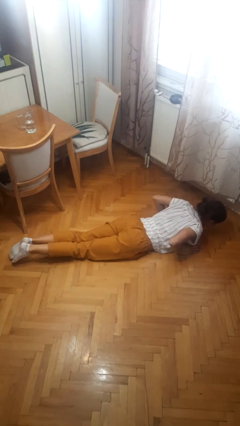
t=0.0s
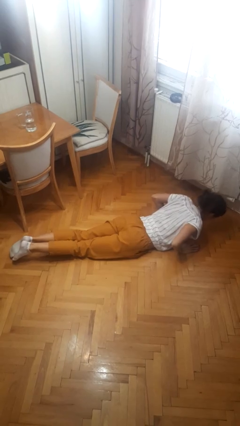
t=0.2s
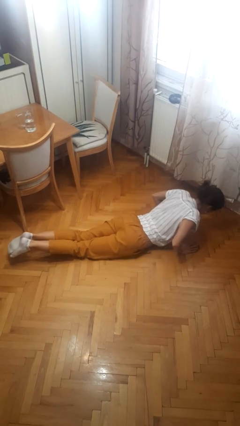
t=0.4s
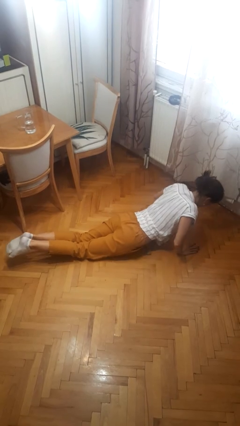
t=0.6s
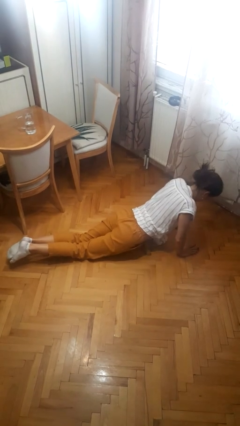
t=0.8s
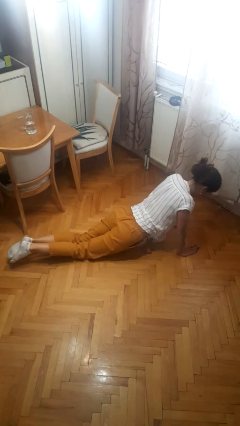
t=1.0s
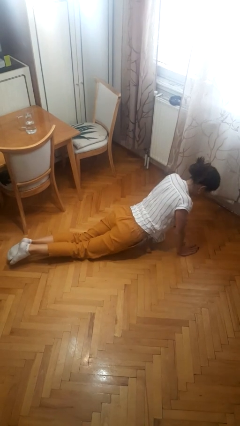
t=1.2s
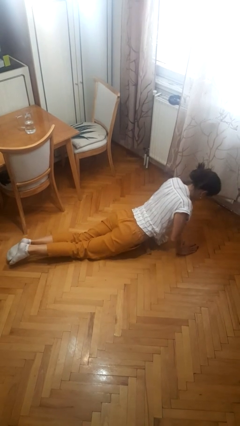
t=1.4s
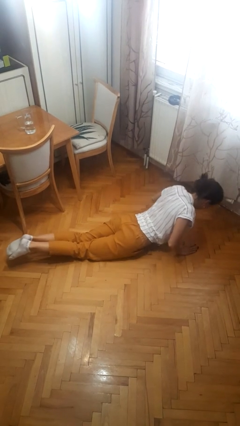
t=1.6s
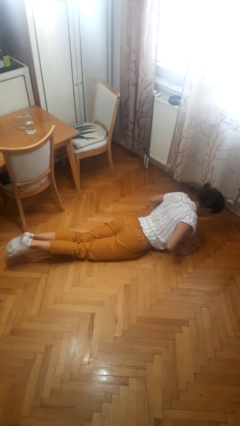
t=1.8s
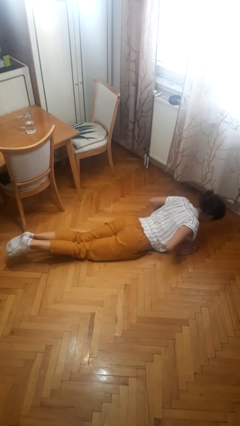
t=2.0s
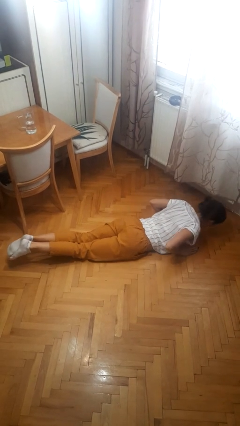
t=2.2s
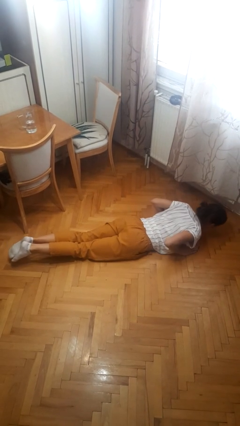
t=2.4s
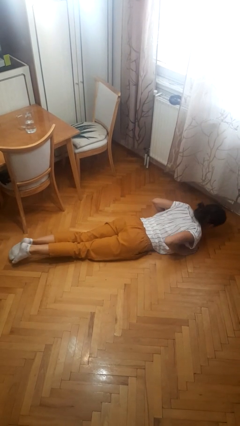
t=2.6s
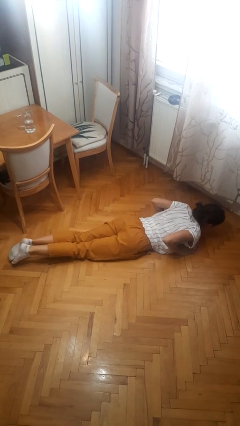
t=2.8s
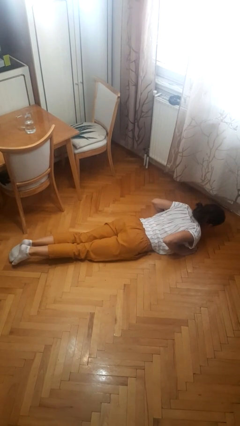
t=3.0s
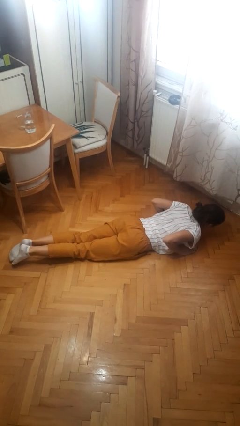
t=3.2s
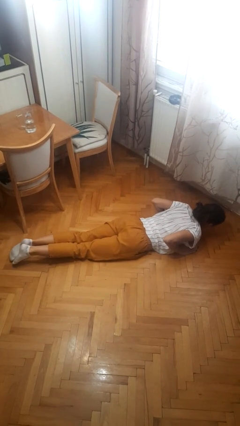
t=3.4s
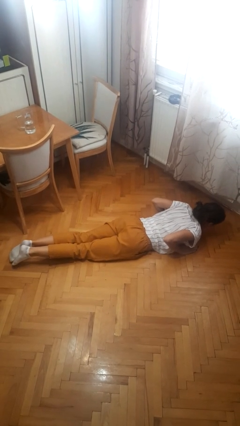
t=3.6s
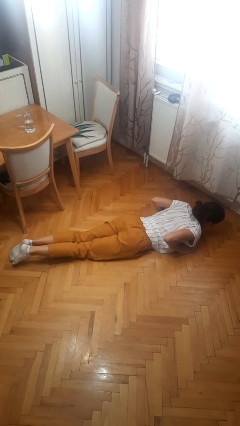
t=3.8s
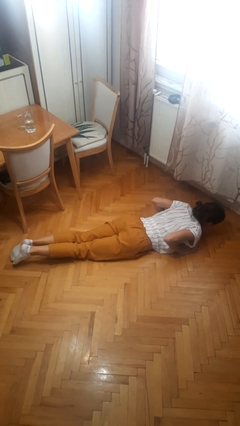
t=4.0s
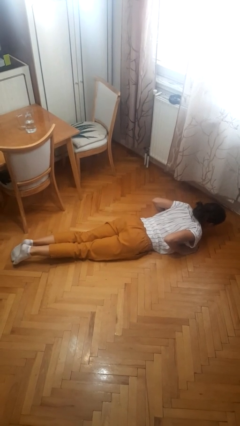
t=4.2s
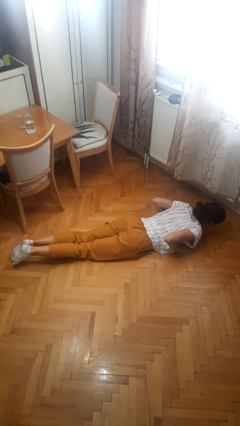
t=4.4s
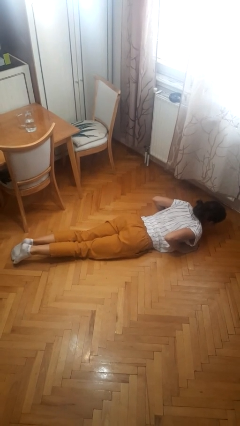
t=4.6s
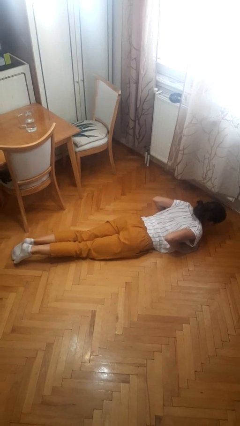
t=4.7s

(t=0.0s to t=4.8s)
person exercises with pushup

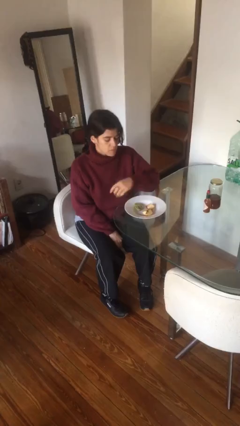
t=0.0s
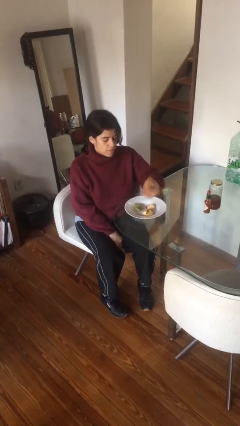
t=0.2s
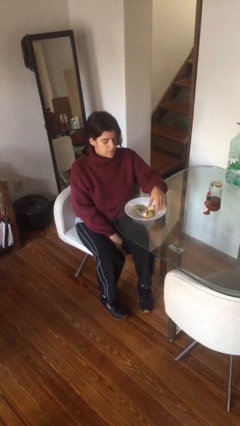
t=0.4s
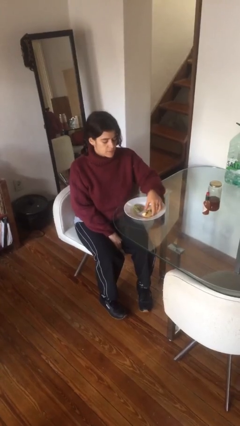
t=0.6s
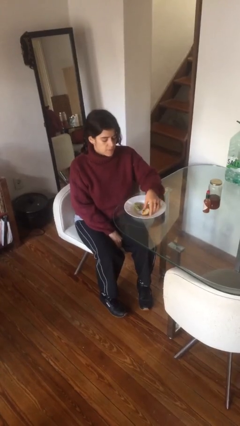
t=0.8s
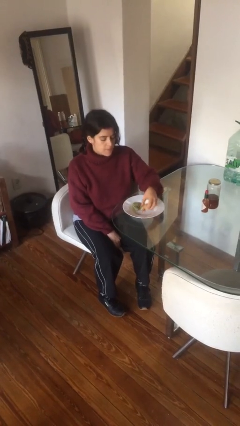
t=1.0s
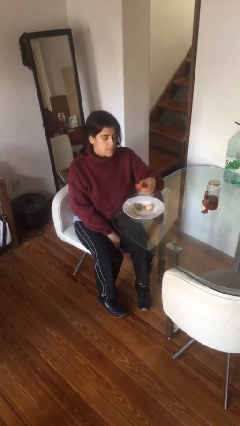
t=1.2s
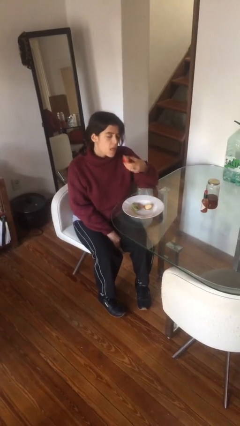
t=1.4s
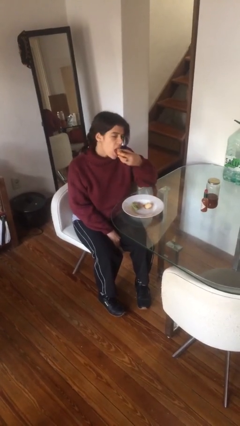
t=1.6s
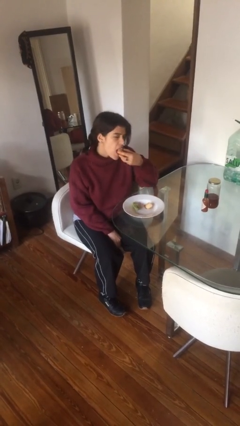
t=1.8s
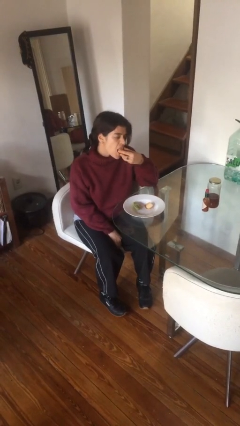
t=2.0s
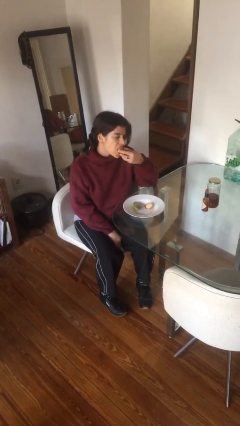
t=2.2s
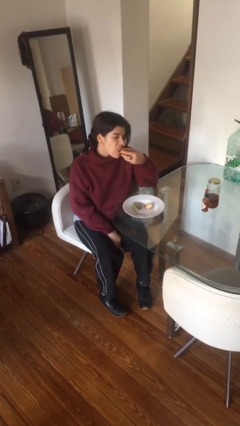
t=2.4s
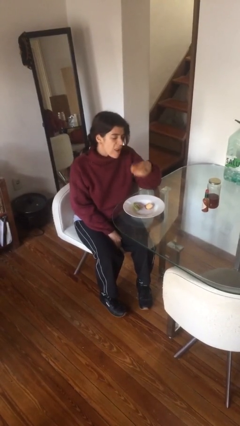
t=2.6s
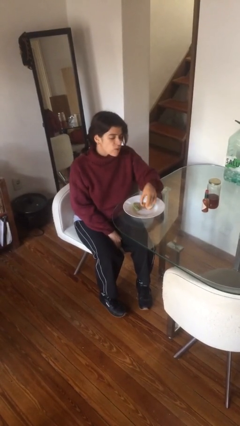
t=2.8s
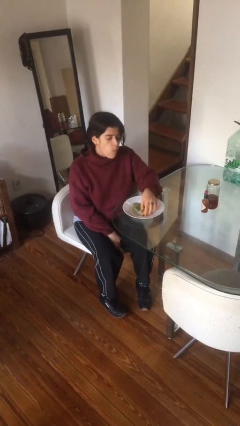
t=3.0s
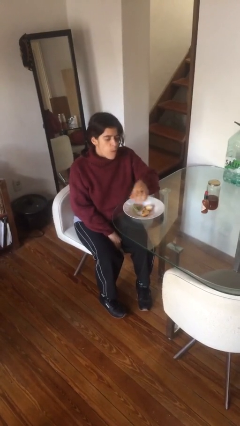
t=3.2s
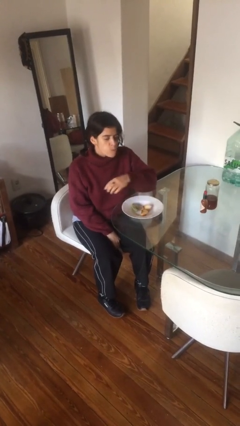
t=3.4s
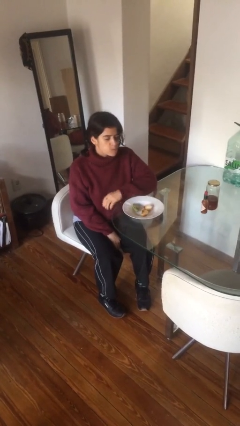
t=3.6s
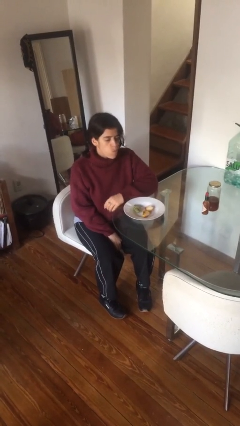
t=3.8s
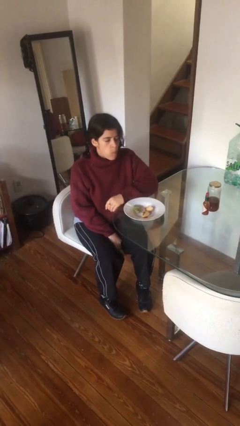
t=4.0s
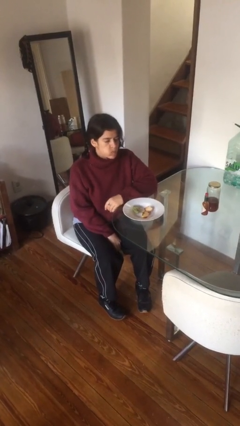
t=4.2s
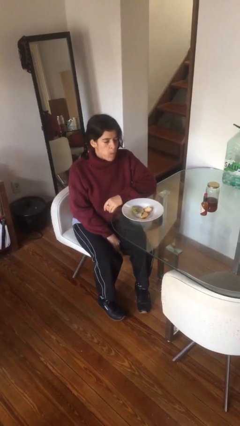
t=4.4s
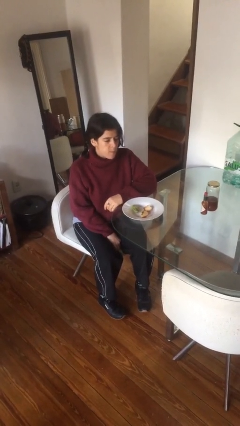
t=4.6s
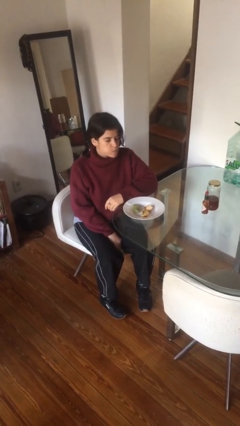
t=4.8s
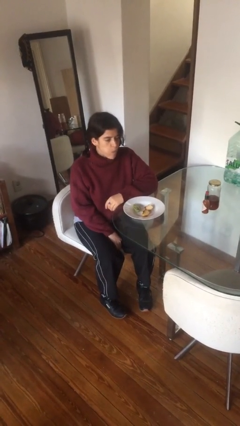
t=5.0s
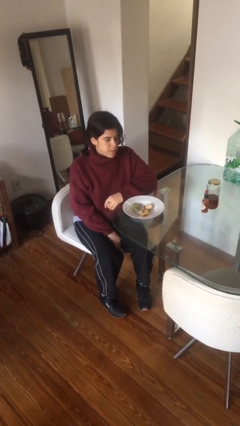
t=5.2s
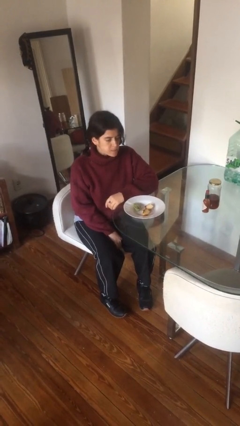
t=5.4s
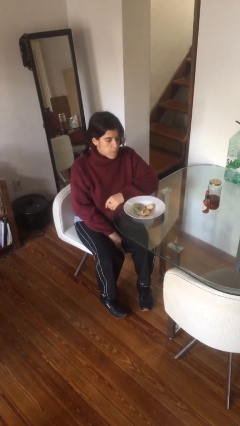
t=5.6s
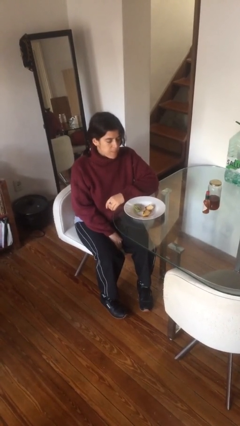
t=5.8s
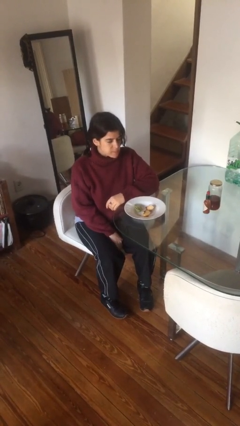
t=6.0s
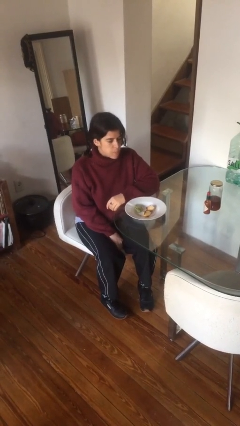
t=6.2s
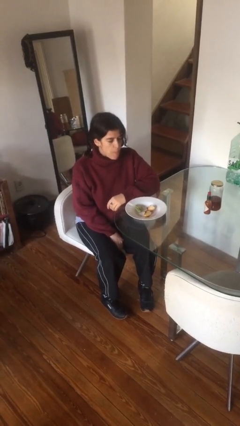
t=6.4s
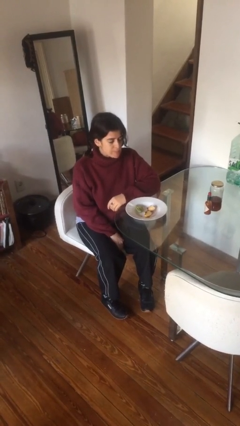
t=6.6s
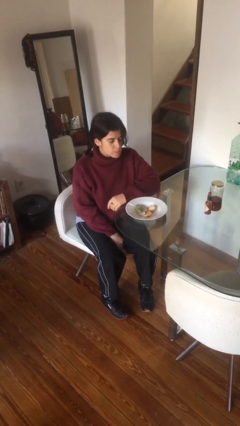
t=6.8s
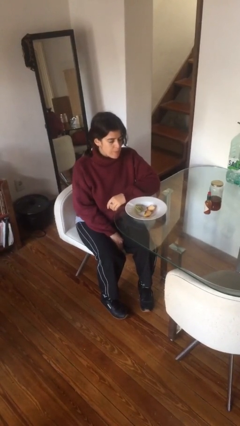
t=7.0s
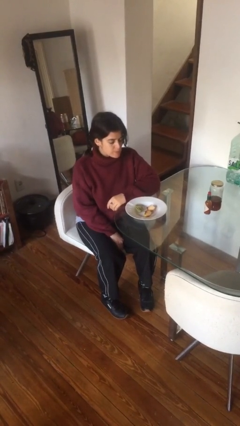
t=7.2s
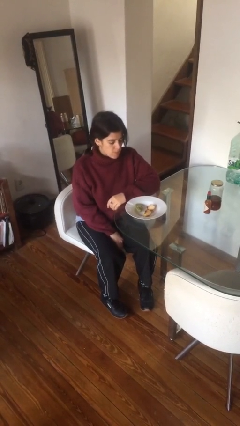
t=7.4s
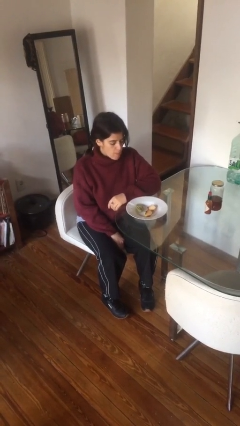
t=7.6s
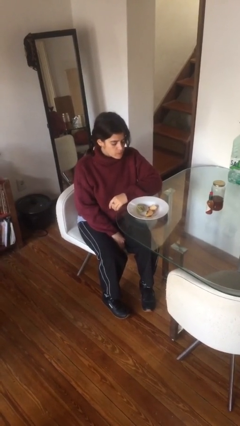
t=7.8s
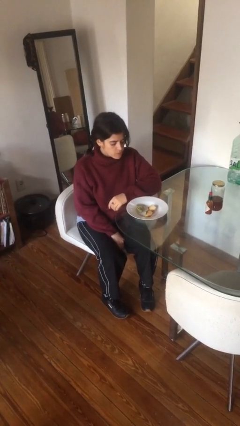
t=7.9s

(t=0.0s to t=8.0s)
person eats with hands

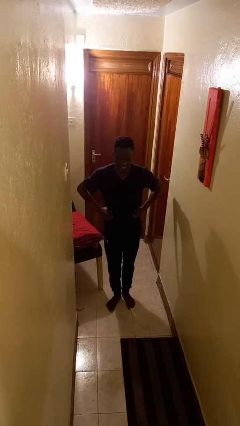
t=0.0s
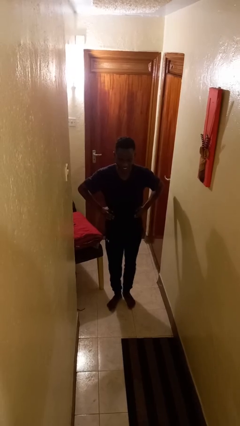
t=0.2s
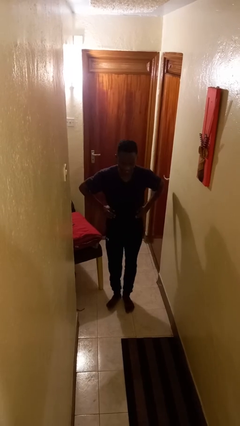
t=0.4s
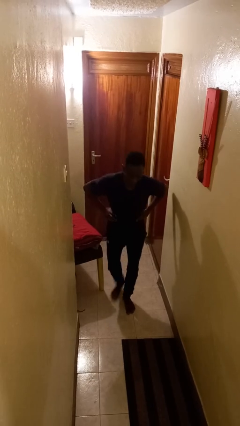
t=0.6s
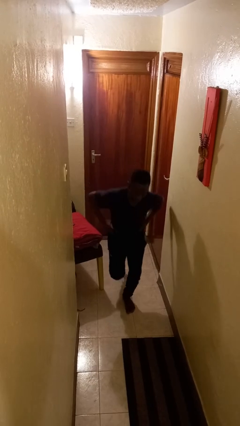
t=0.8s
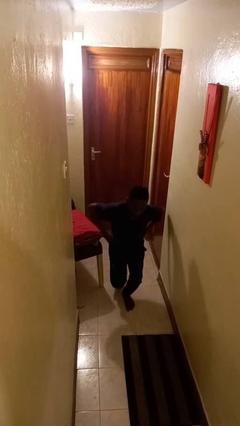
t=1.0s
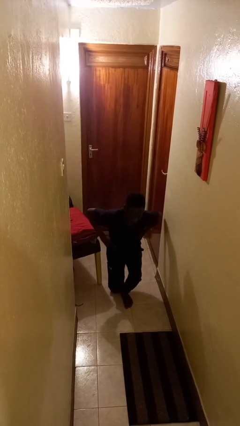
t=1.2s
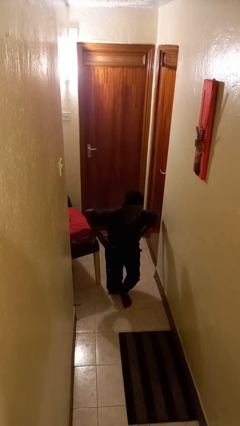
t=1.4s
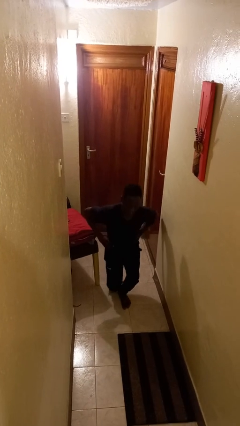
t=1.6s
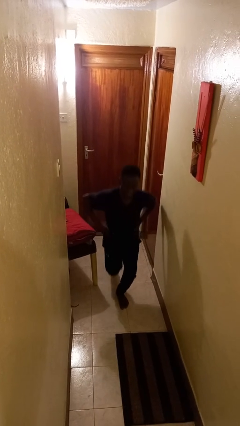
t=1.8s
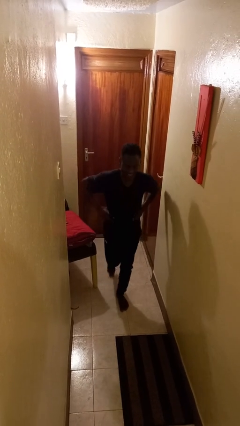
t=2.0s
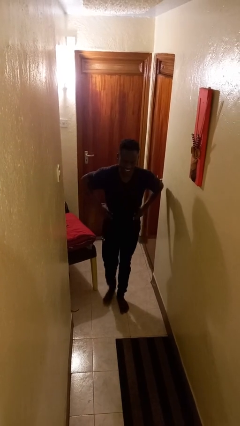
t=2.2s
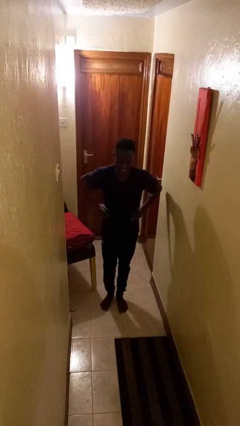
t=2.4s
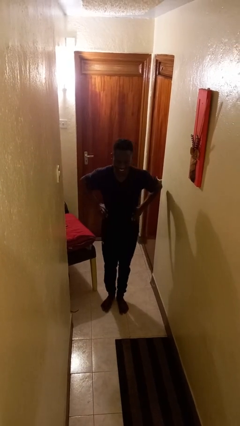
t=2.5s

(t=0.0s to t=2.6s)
person exercises with lunges

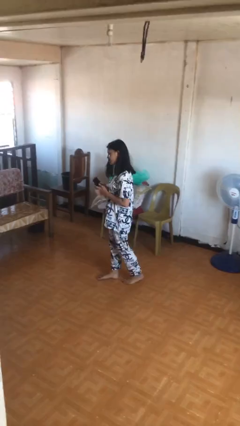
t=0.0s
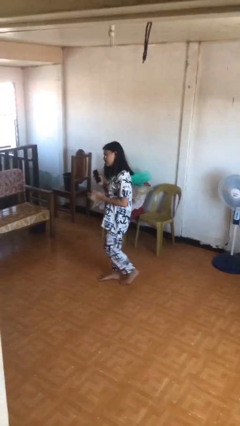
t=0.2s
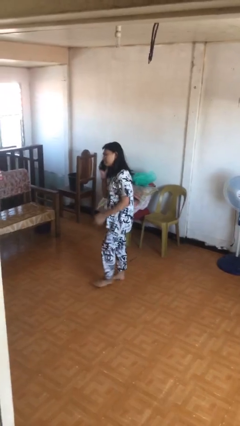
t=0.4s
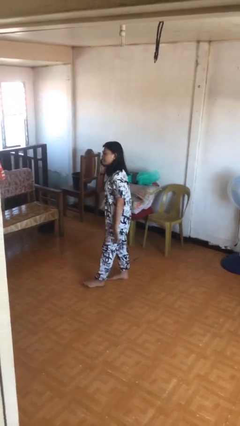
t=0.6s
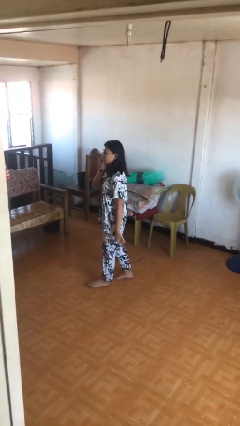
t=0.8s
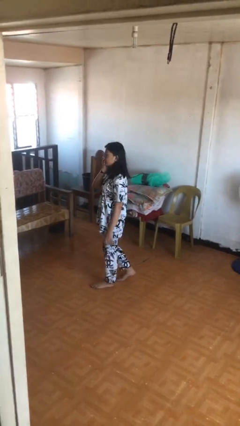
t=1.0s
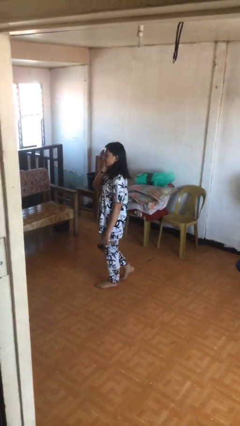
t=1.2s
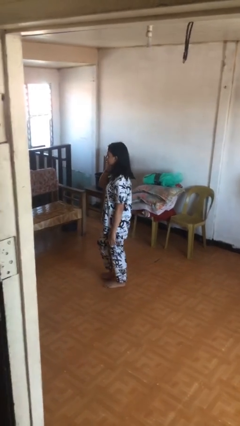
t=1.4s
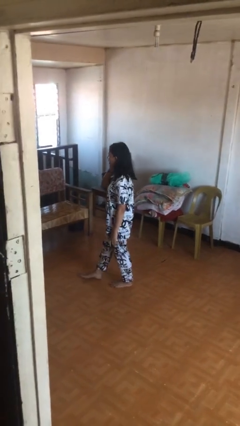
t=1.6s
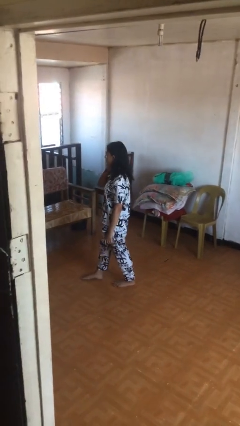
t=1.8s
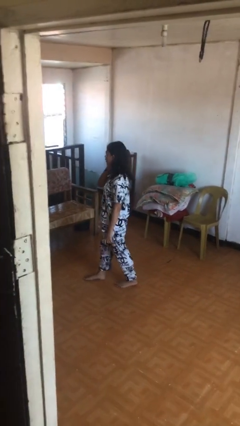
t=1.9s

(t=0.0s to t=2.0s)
person talks on phone

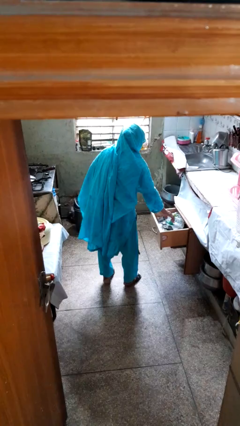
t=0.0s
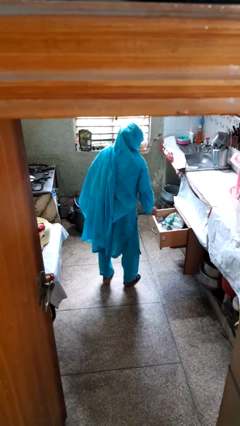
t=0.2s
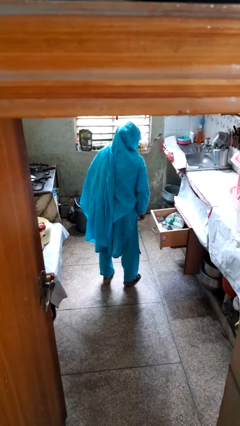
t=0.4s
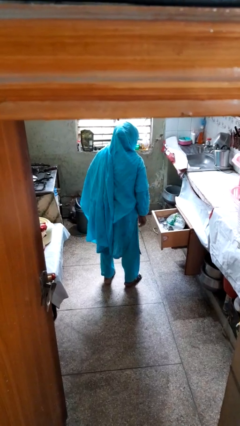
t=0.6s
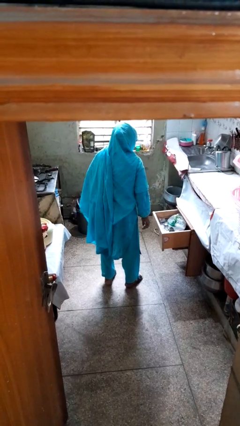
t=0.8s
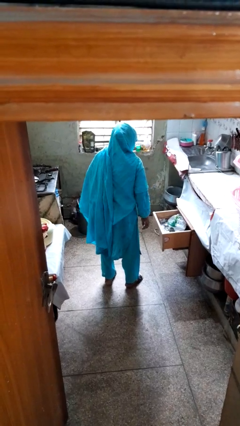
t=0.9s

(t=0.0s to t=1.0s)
person puts object into kitchen drawer
